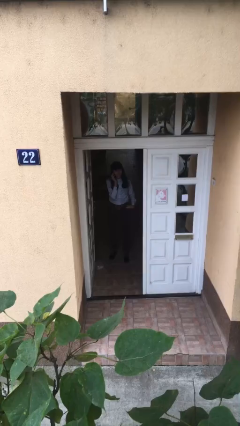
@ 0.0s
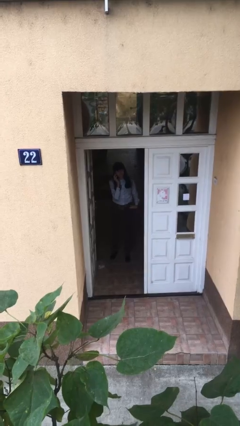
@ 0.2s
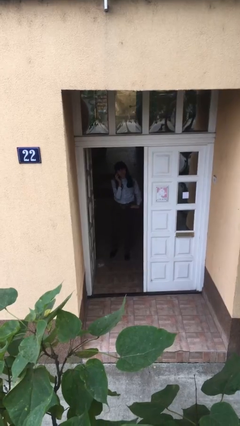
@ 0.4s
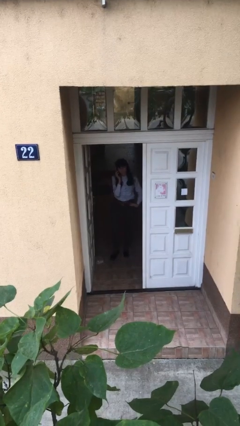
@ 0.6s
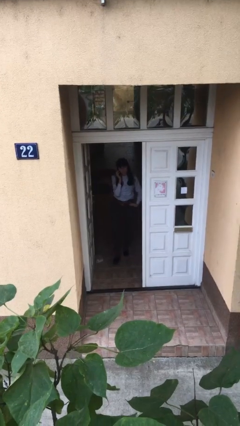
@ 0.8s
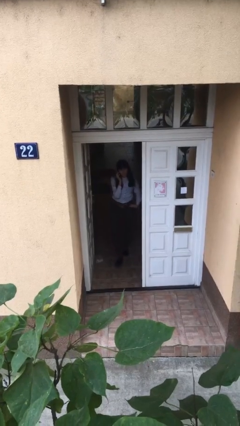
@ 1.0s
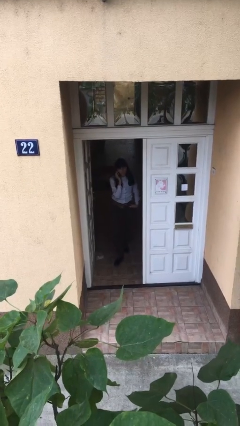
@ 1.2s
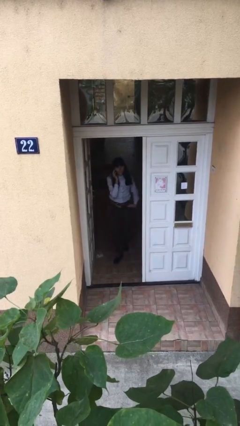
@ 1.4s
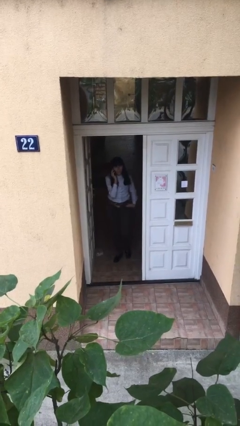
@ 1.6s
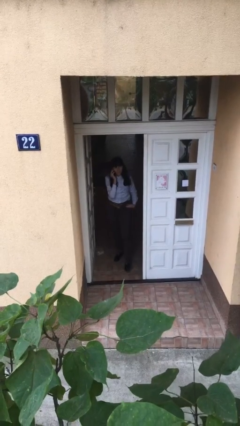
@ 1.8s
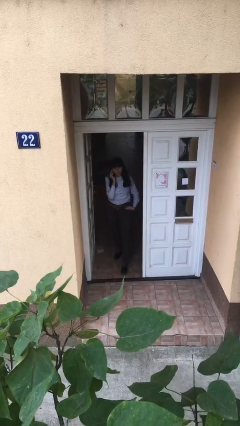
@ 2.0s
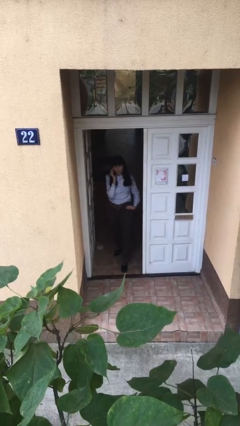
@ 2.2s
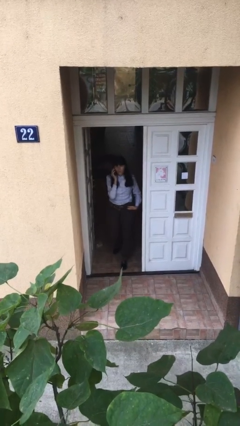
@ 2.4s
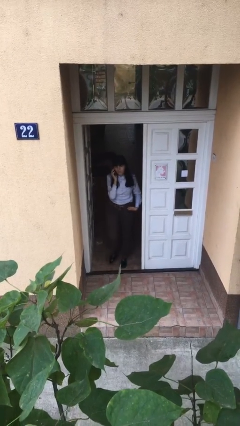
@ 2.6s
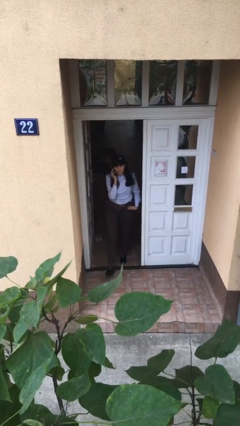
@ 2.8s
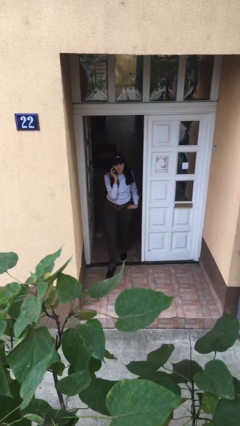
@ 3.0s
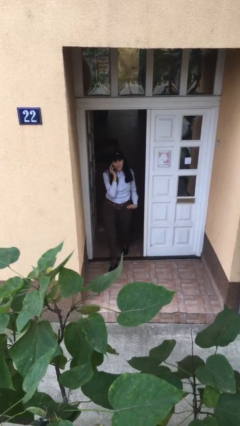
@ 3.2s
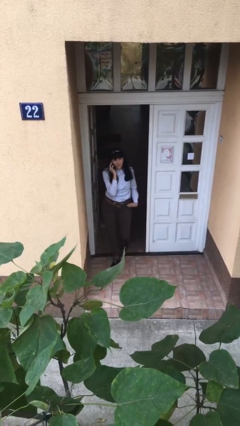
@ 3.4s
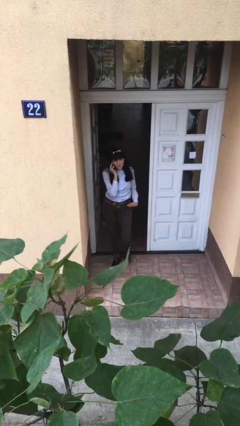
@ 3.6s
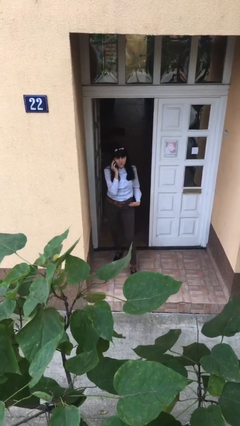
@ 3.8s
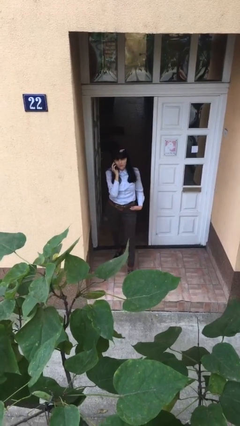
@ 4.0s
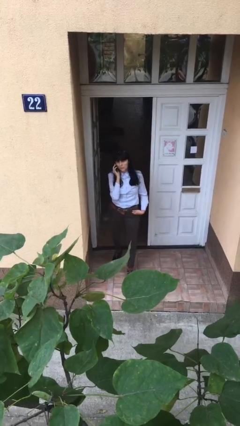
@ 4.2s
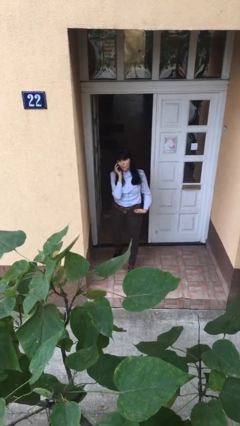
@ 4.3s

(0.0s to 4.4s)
person enters scene through structure

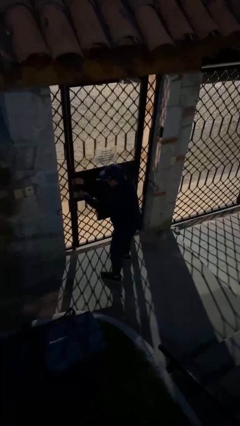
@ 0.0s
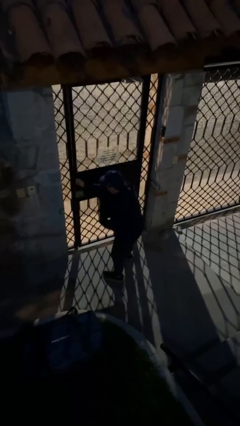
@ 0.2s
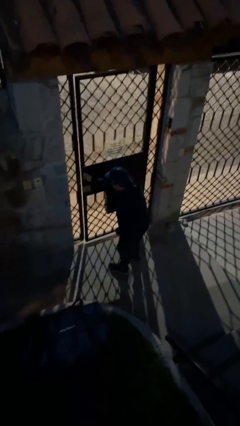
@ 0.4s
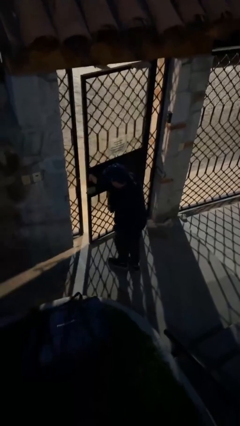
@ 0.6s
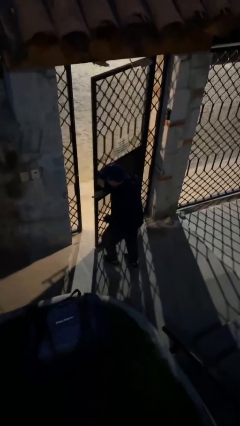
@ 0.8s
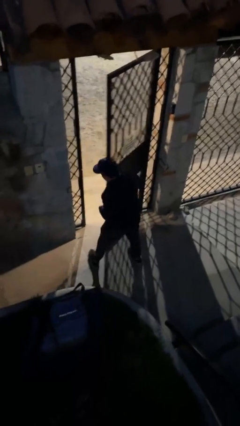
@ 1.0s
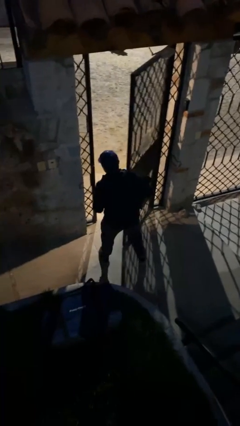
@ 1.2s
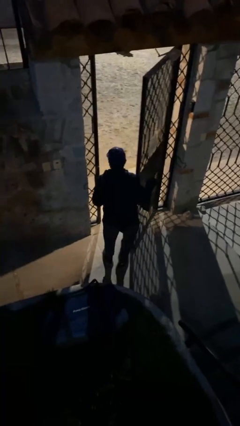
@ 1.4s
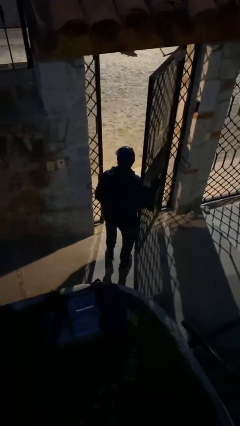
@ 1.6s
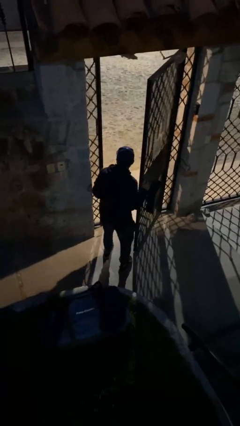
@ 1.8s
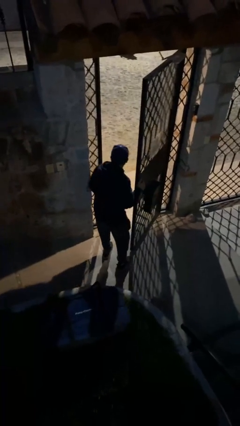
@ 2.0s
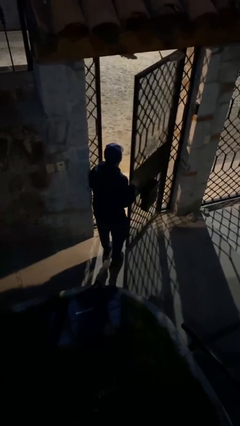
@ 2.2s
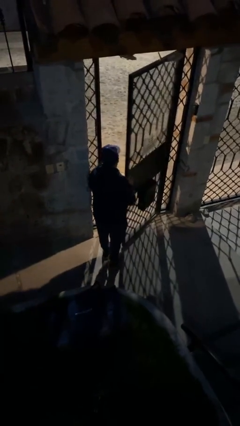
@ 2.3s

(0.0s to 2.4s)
person opens facility door

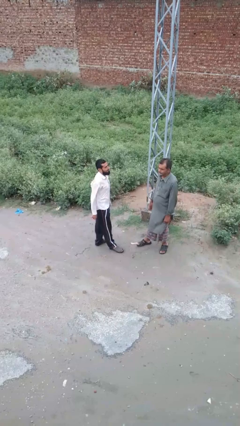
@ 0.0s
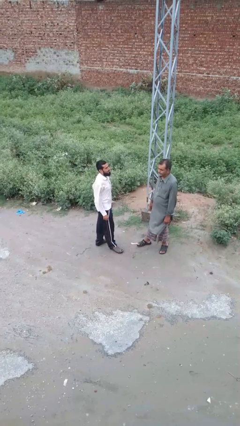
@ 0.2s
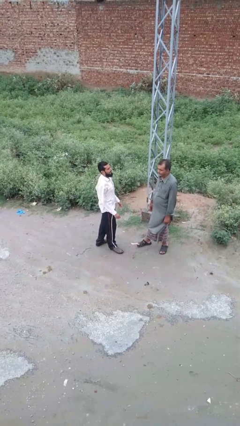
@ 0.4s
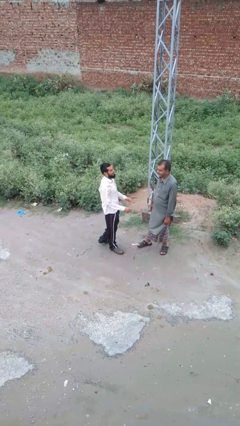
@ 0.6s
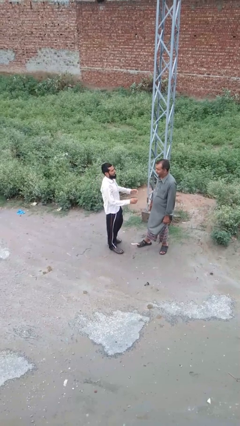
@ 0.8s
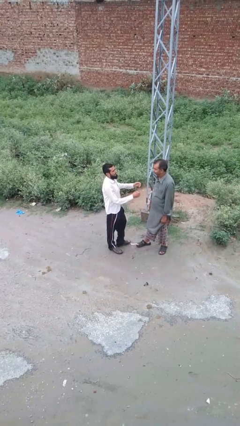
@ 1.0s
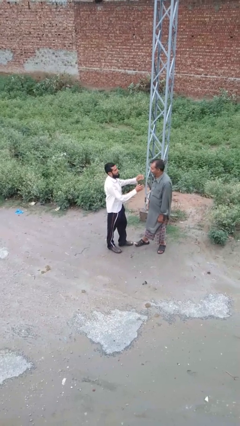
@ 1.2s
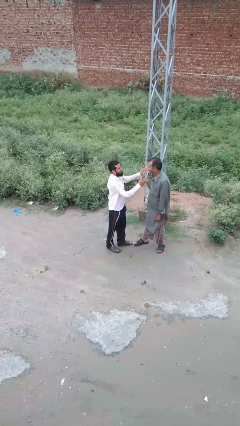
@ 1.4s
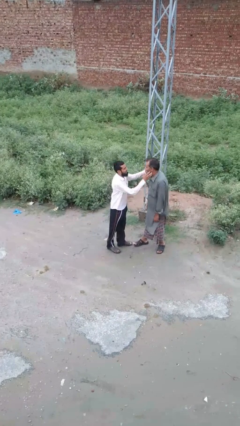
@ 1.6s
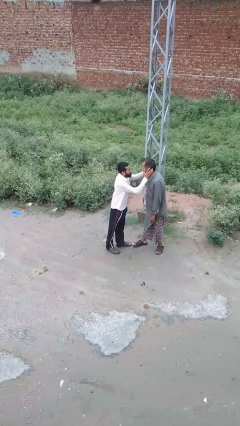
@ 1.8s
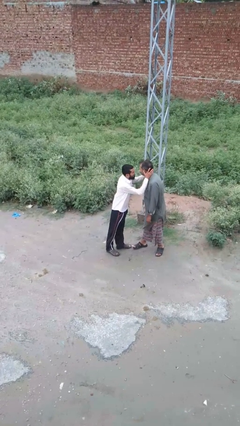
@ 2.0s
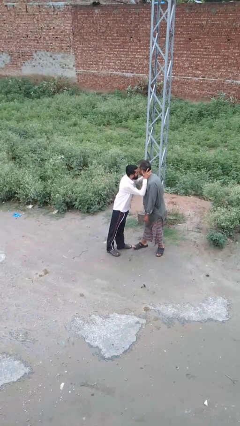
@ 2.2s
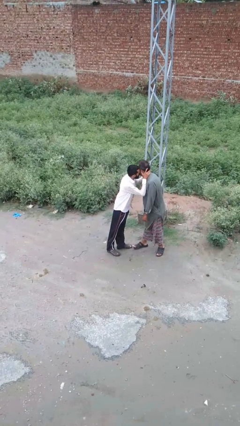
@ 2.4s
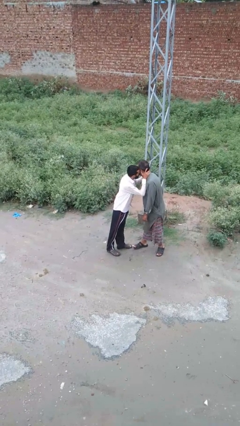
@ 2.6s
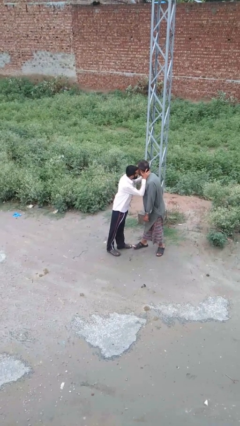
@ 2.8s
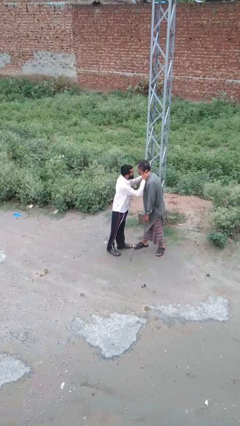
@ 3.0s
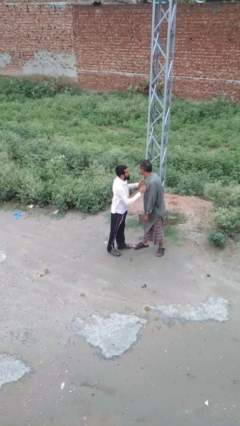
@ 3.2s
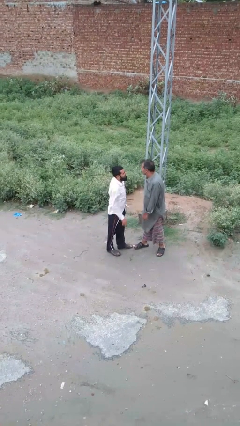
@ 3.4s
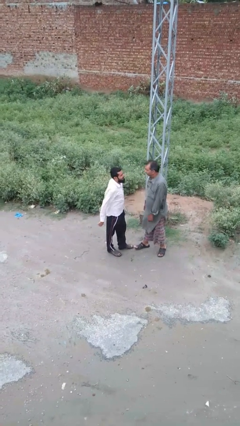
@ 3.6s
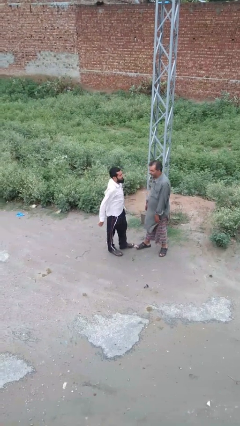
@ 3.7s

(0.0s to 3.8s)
person kisses cheek of person

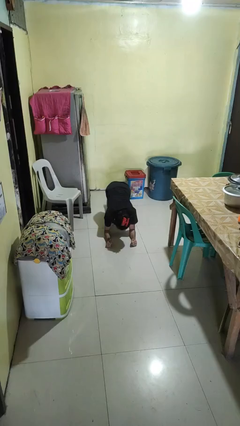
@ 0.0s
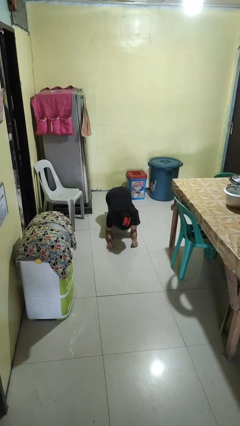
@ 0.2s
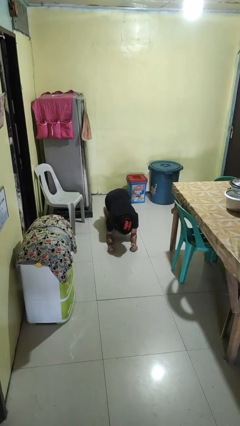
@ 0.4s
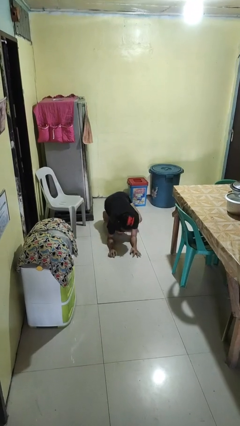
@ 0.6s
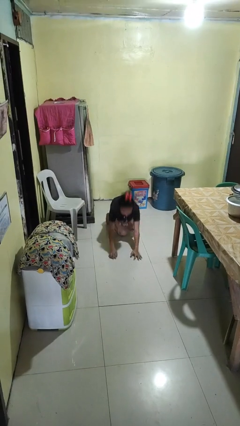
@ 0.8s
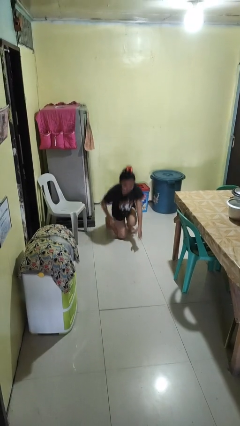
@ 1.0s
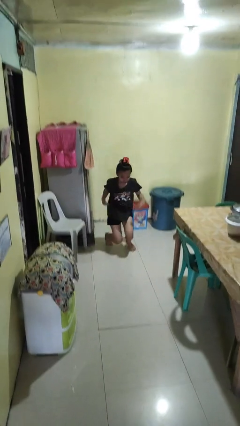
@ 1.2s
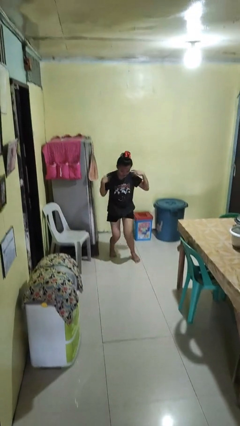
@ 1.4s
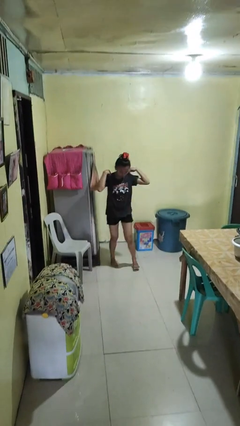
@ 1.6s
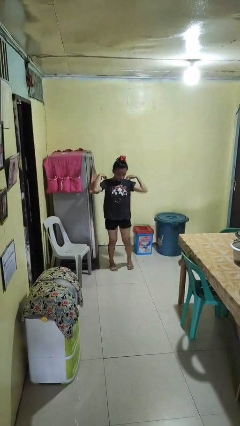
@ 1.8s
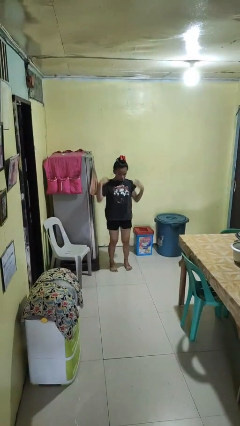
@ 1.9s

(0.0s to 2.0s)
person stands up from floor

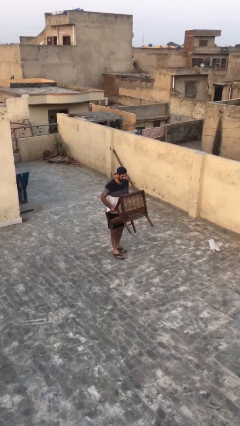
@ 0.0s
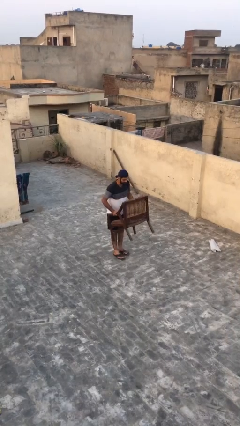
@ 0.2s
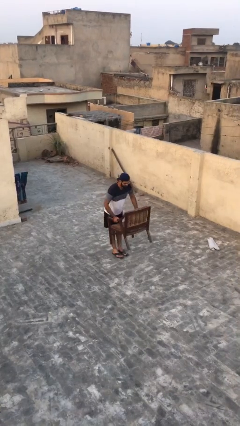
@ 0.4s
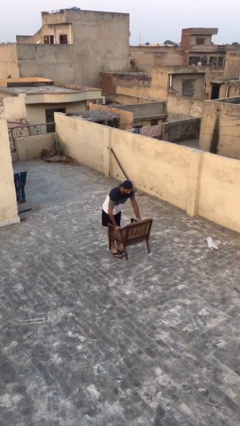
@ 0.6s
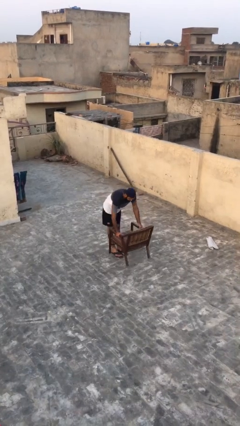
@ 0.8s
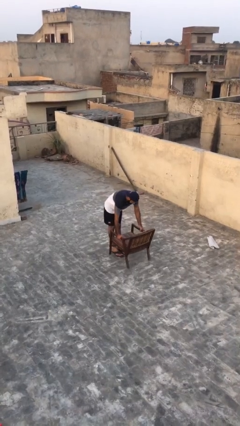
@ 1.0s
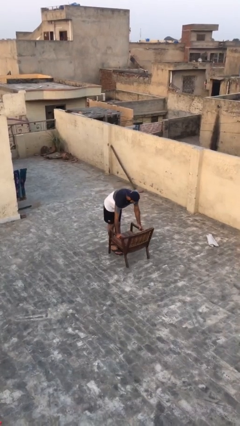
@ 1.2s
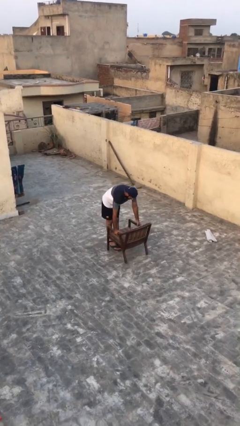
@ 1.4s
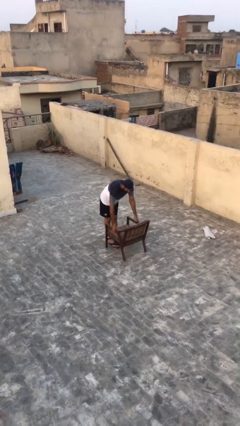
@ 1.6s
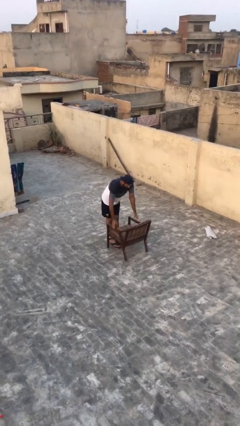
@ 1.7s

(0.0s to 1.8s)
person puts down object on floor

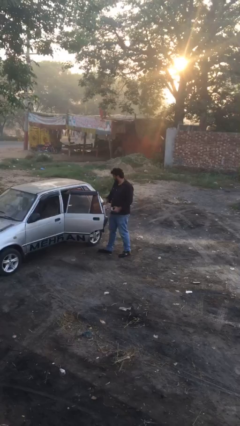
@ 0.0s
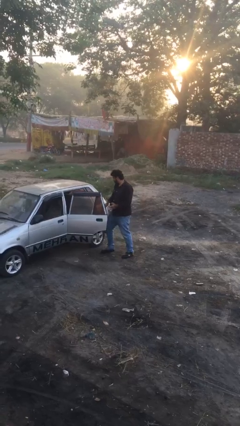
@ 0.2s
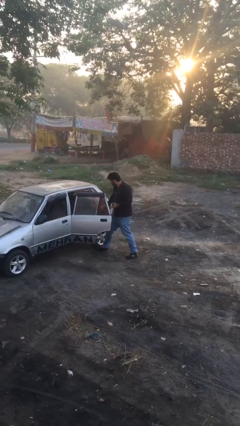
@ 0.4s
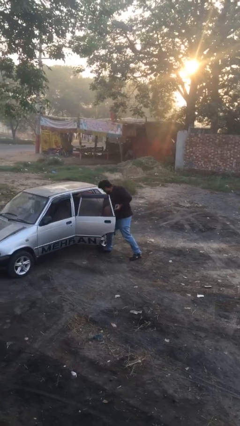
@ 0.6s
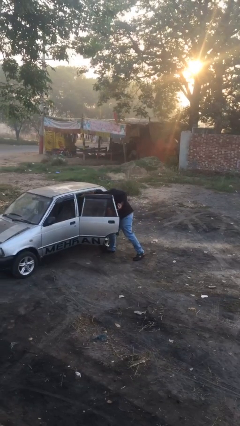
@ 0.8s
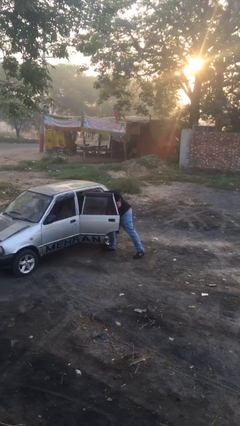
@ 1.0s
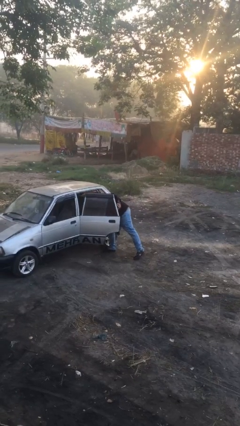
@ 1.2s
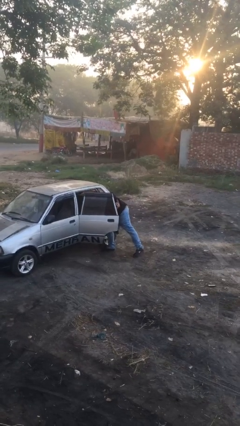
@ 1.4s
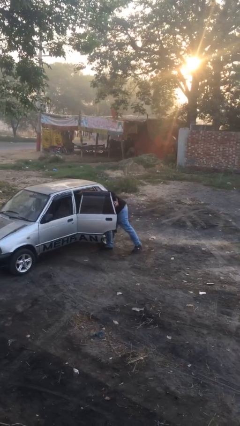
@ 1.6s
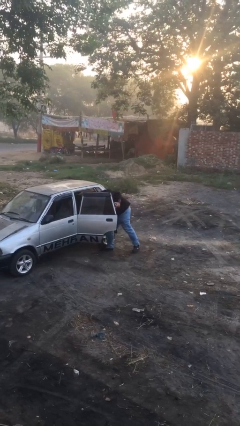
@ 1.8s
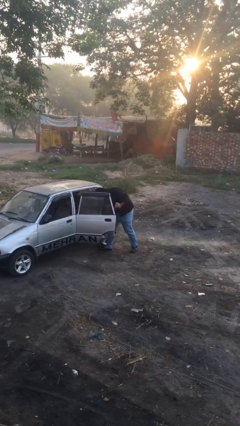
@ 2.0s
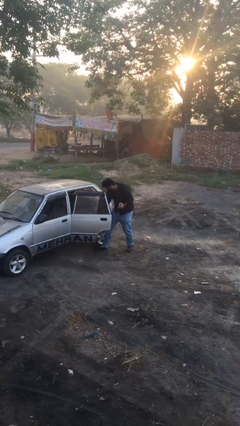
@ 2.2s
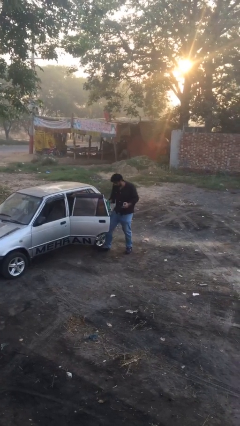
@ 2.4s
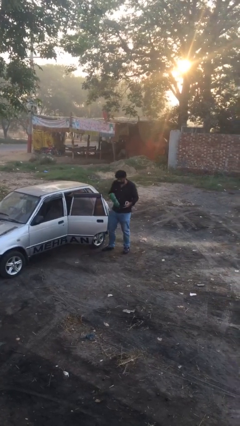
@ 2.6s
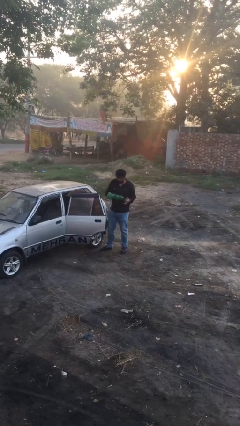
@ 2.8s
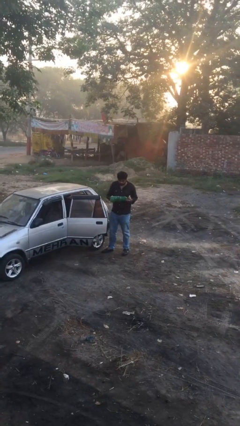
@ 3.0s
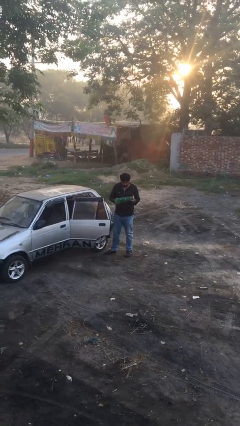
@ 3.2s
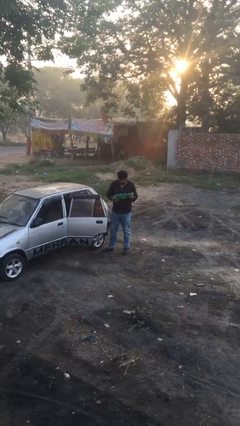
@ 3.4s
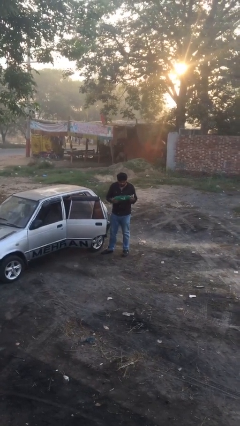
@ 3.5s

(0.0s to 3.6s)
person unloads car
